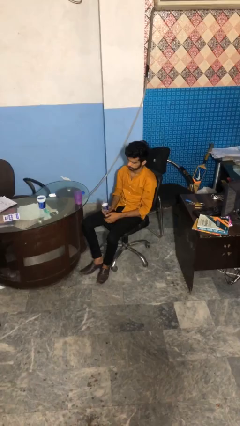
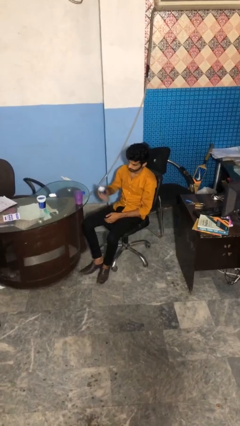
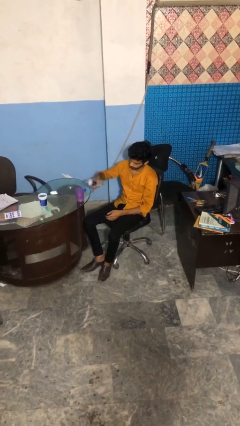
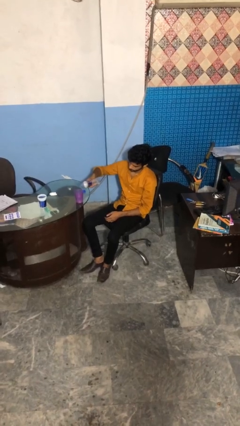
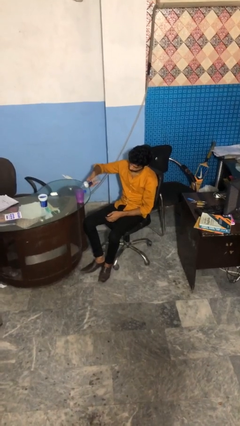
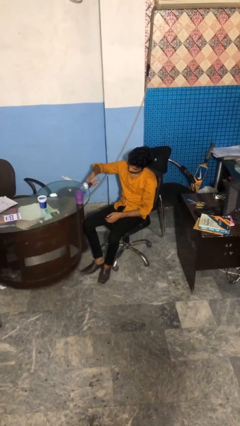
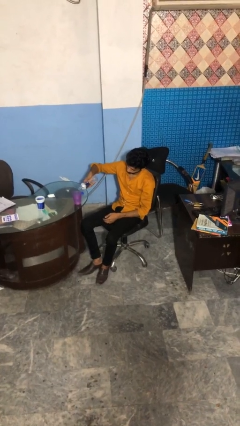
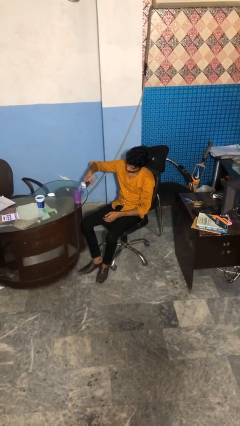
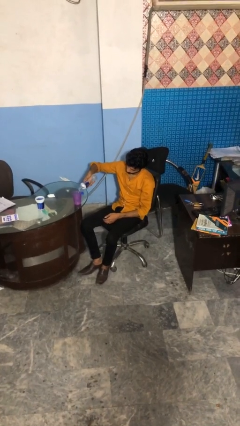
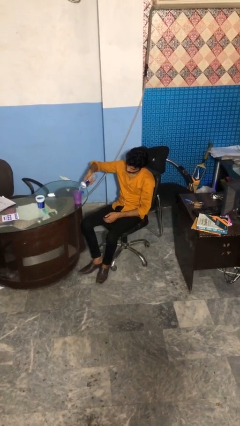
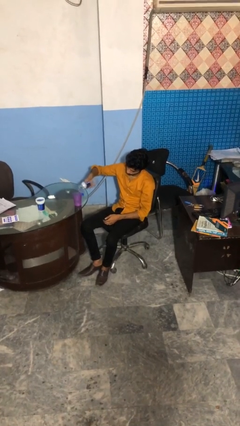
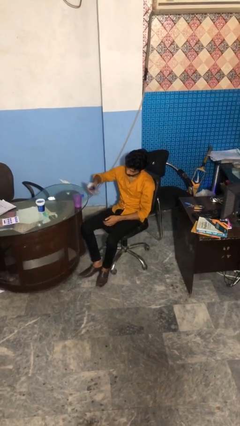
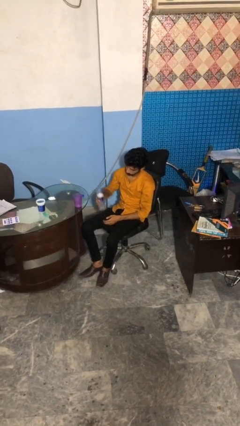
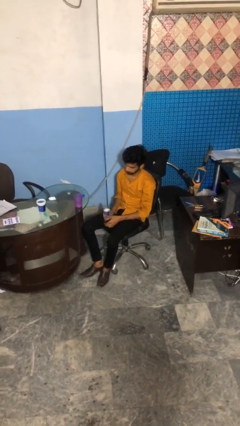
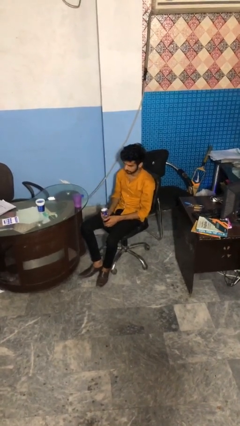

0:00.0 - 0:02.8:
person pours liquid into cup

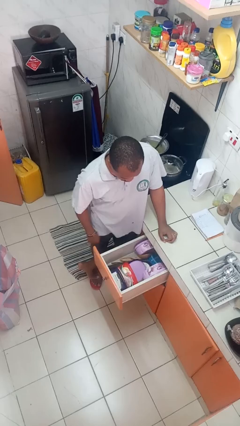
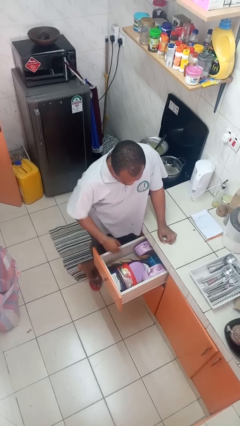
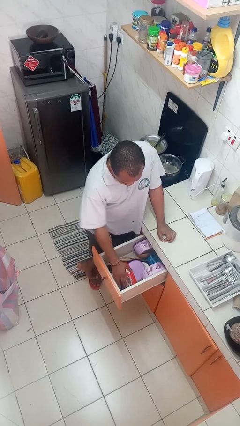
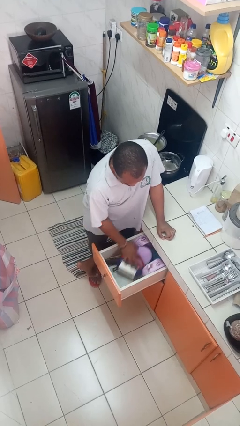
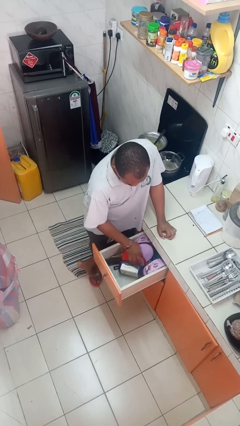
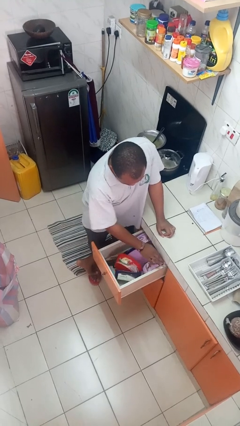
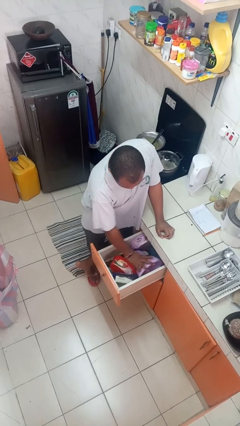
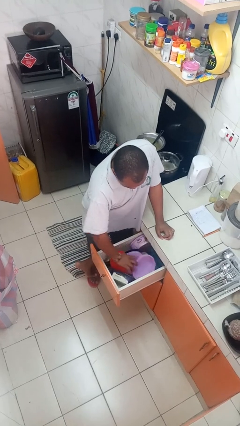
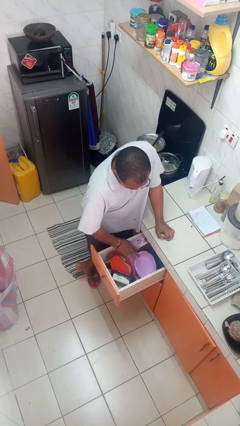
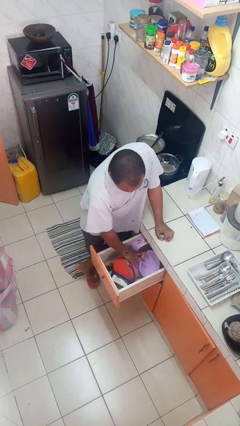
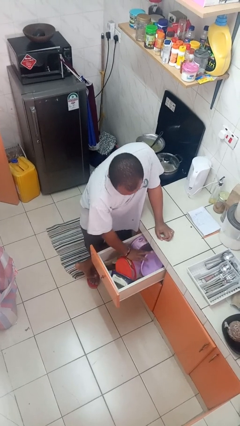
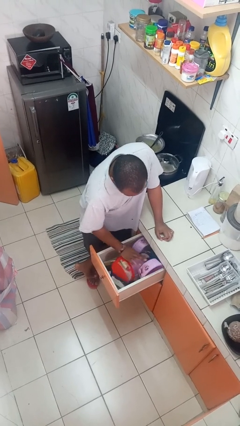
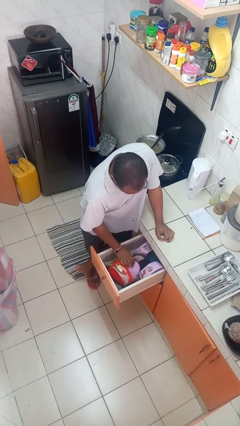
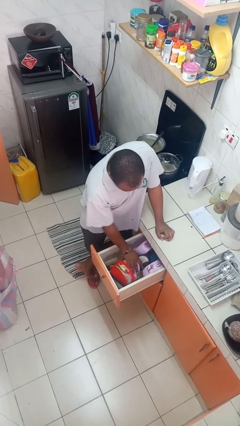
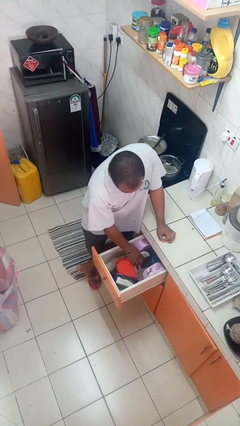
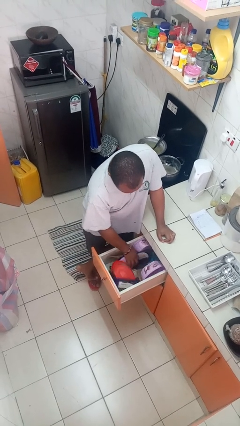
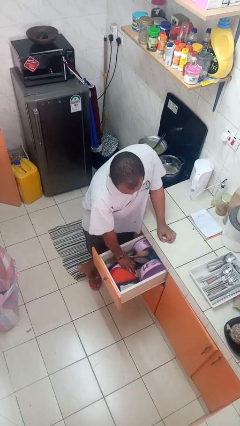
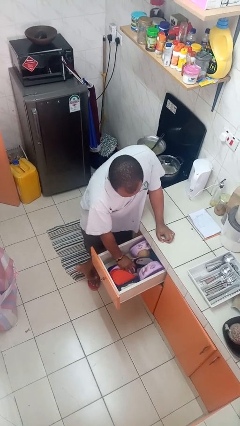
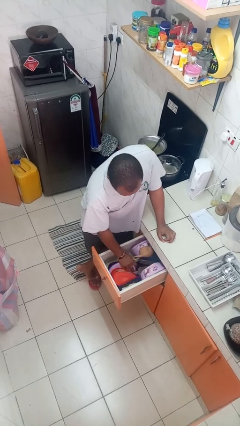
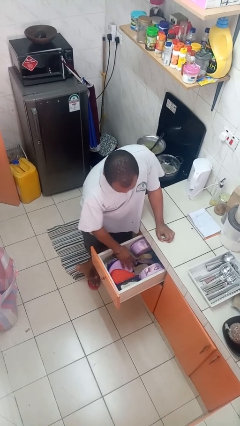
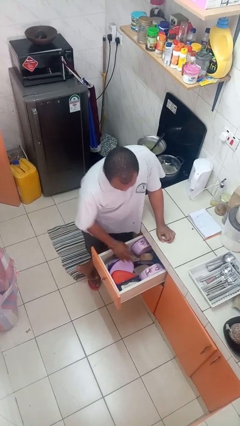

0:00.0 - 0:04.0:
person searches in kitchen drawer

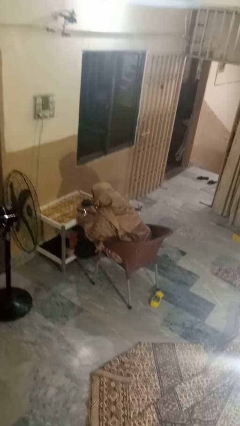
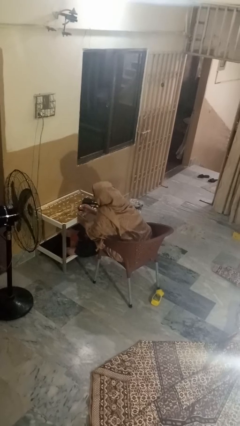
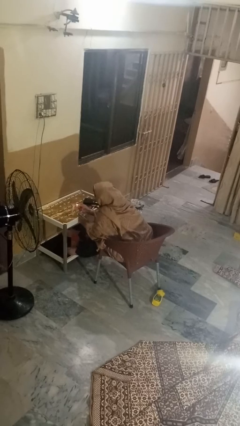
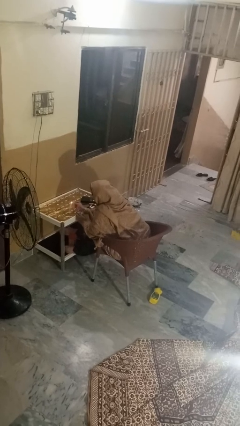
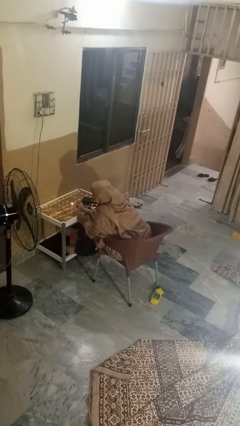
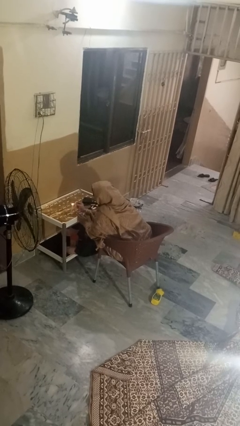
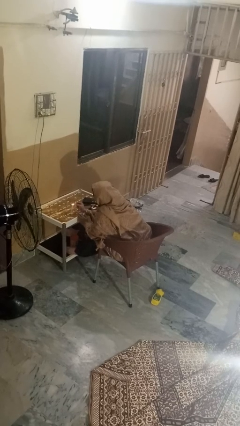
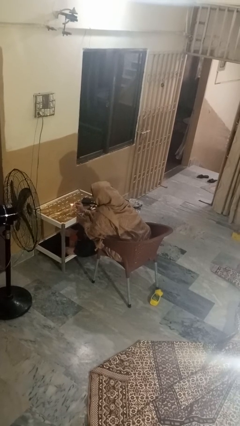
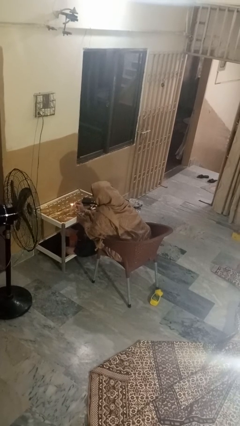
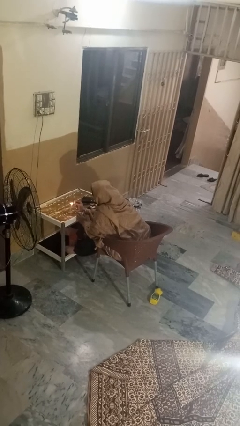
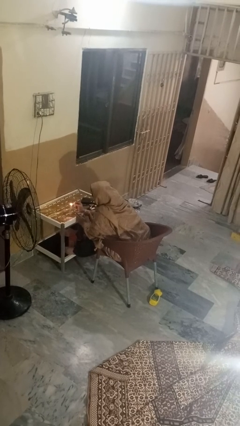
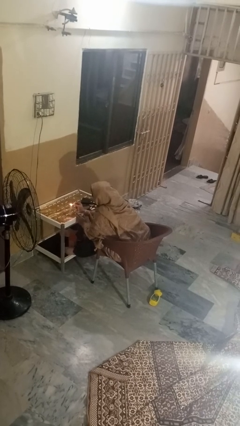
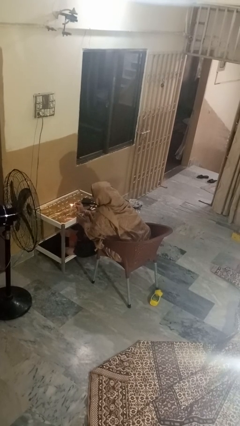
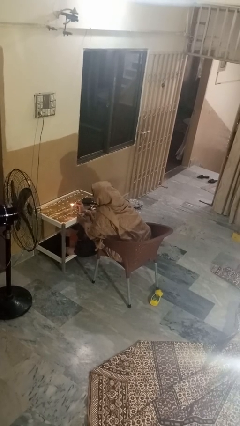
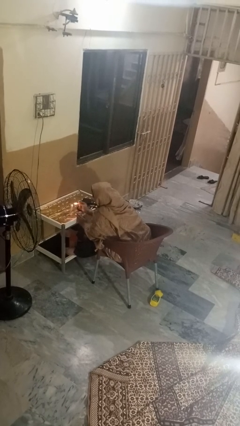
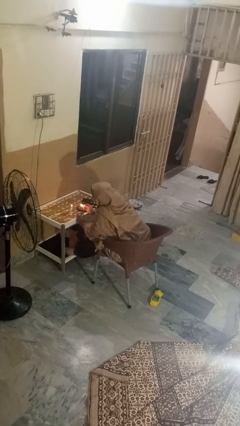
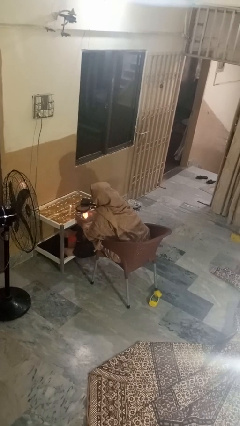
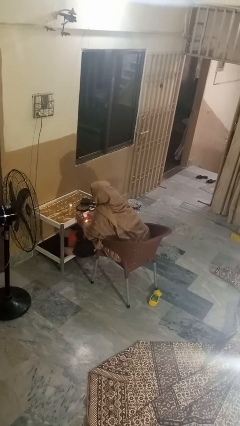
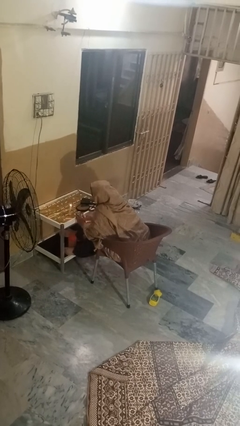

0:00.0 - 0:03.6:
person lights candle

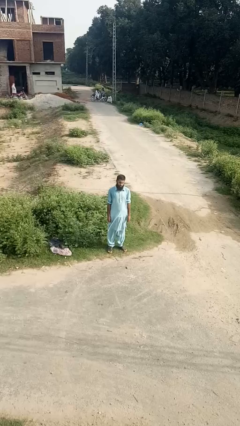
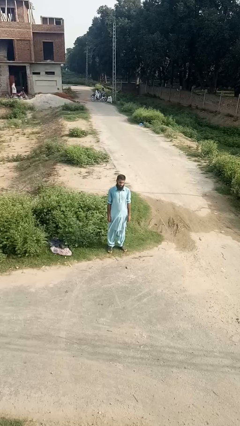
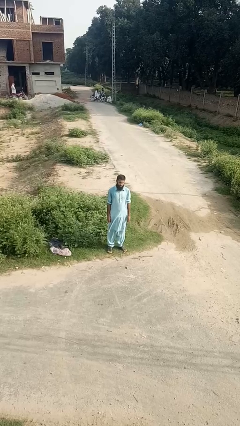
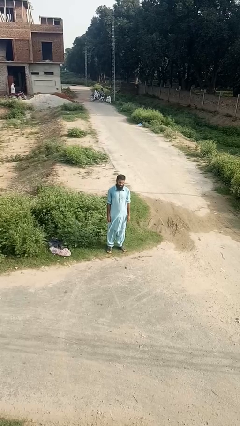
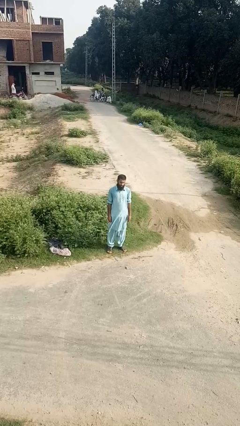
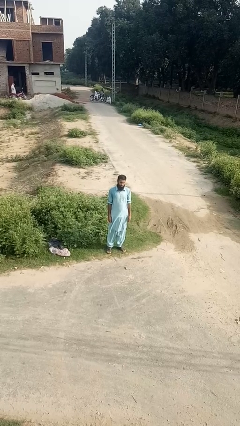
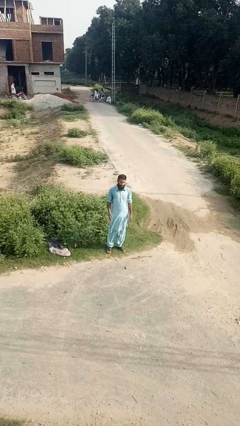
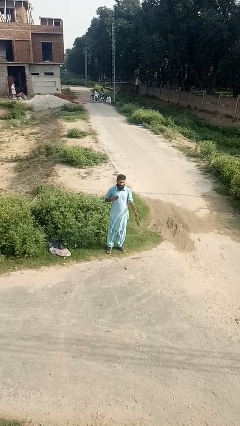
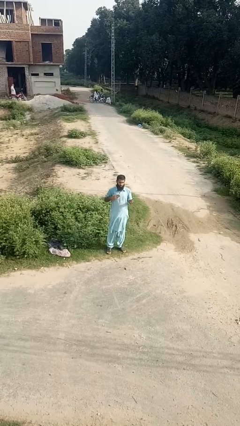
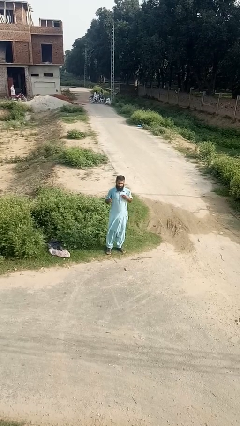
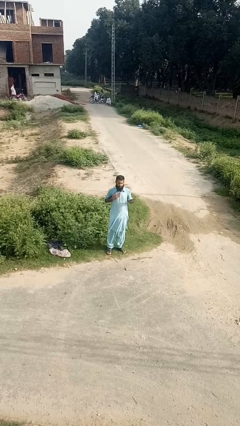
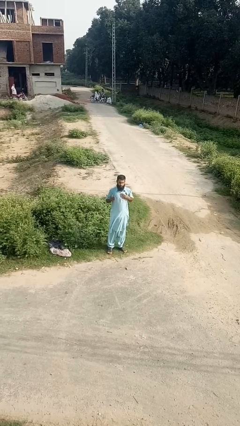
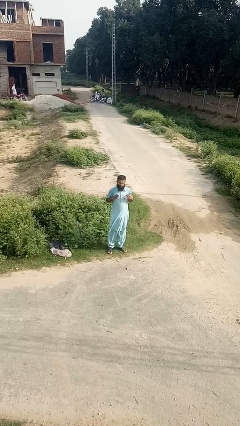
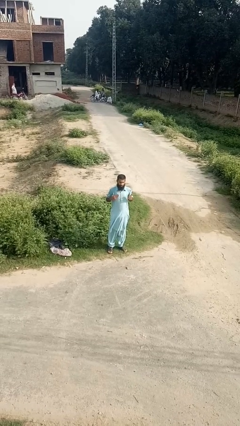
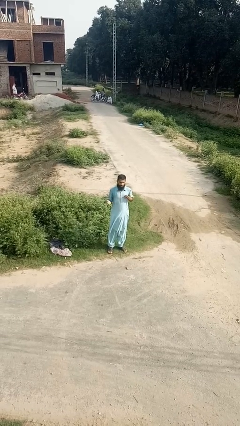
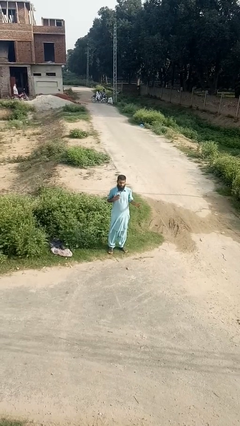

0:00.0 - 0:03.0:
person drums on chest

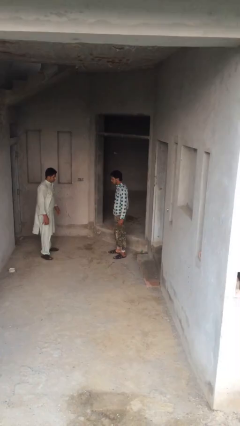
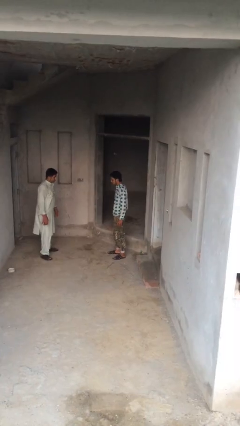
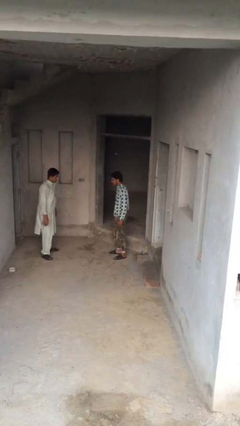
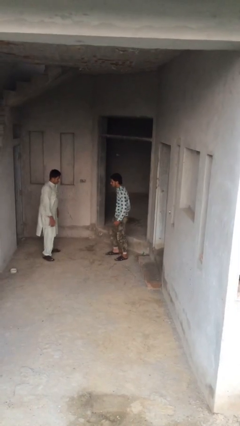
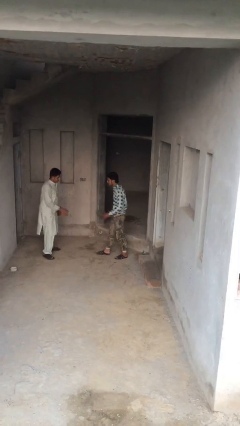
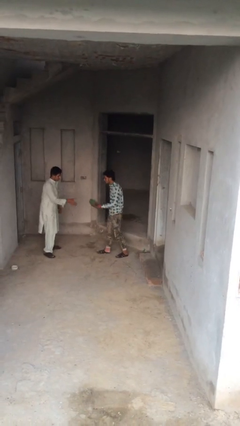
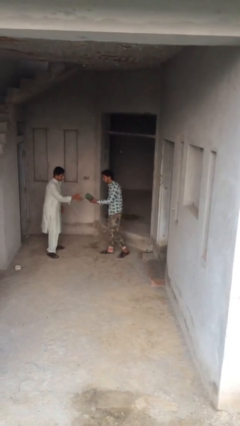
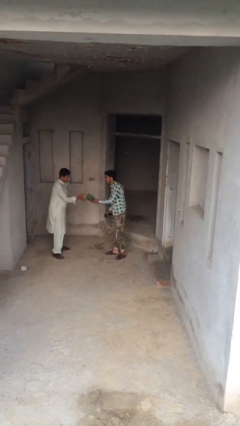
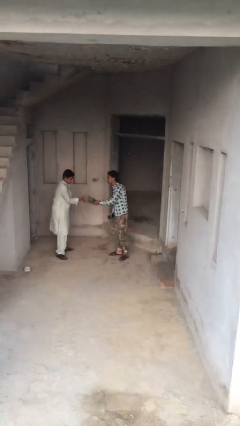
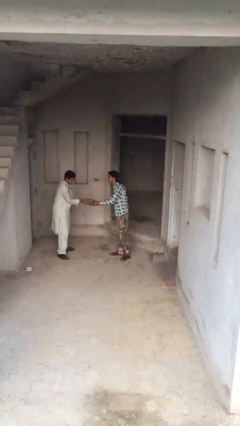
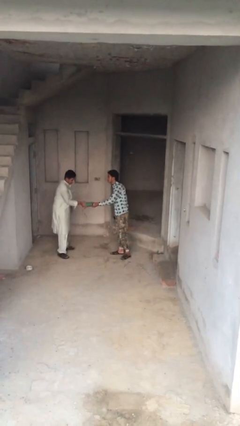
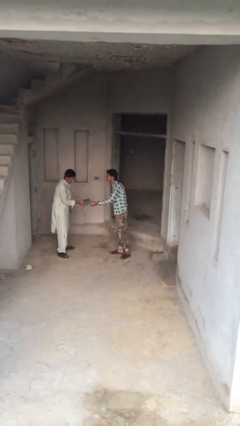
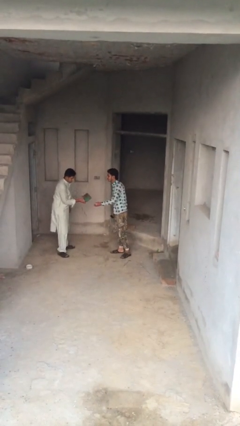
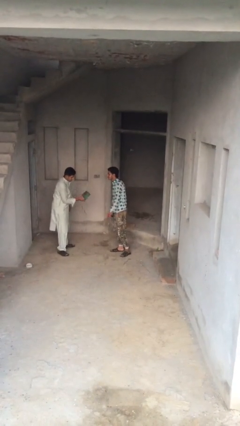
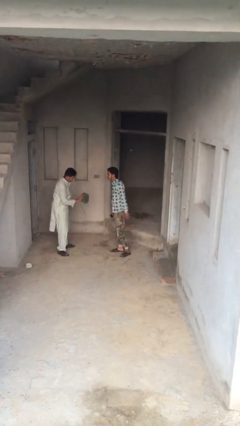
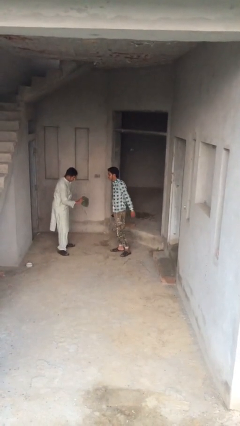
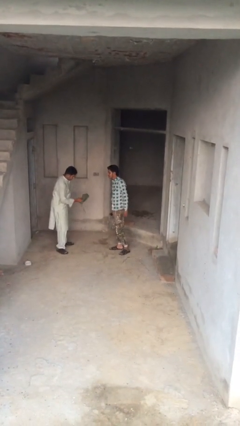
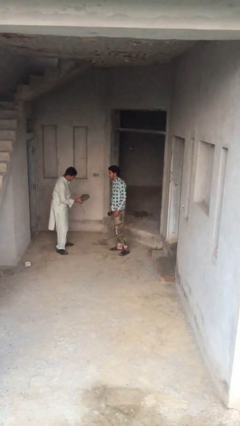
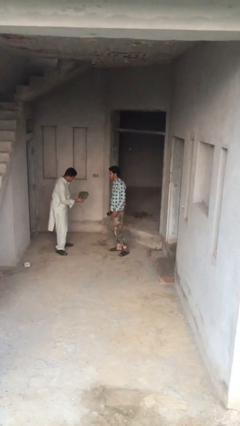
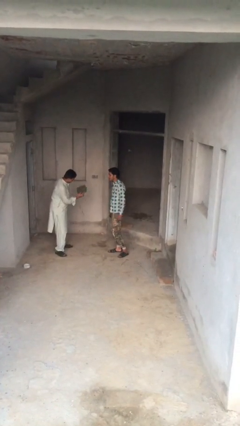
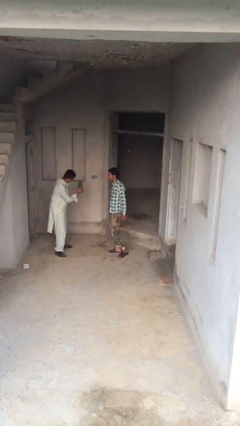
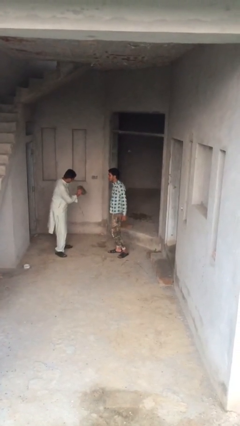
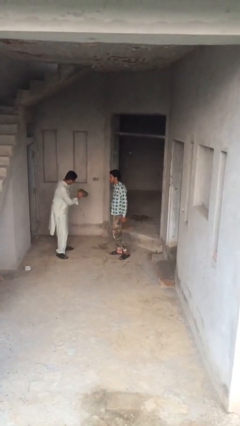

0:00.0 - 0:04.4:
person transfers object to person
